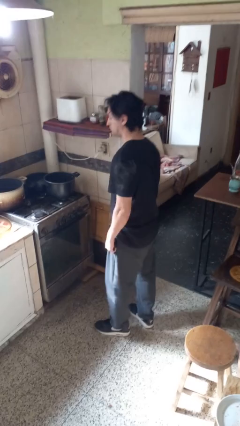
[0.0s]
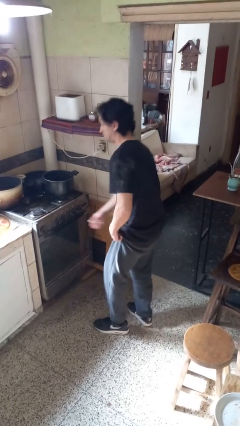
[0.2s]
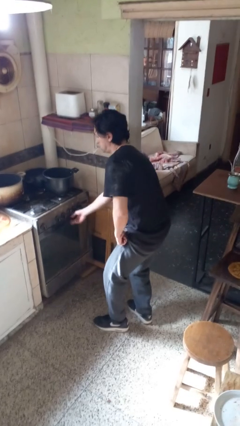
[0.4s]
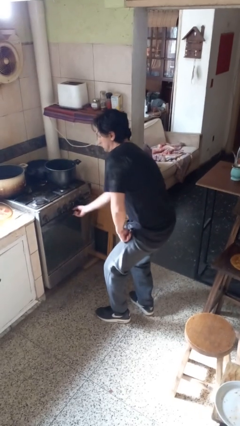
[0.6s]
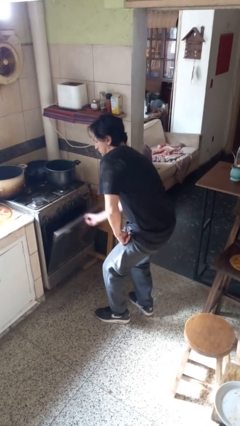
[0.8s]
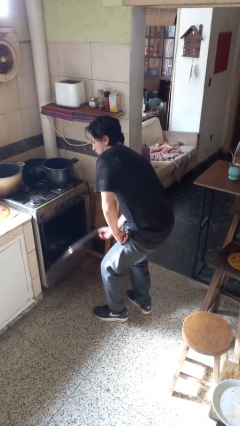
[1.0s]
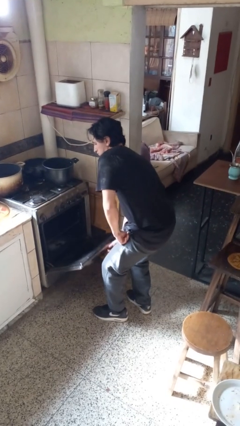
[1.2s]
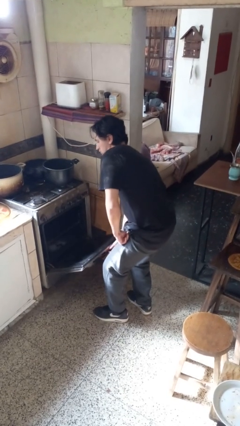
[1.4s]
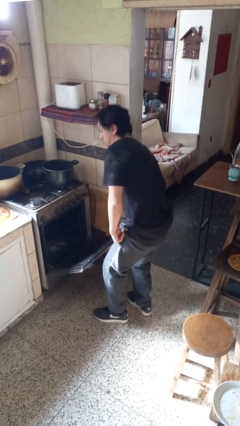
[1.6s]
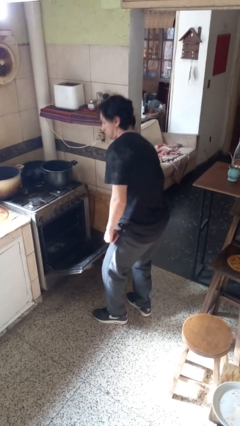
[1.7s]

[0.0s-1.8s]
person opens oven door

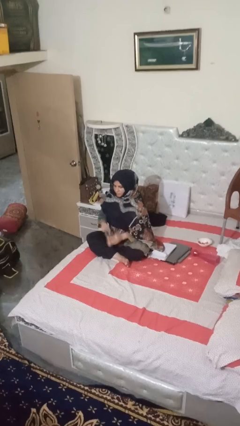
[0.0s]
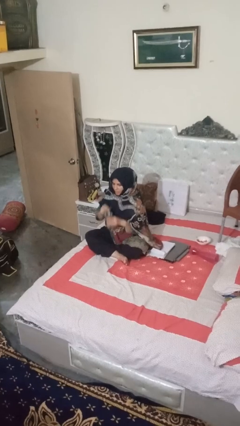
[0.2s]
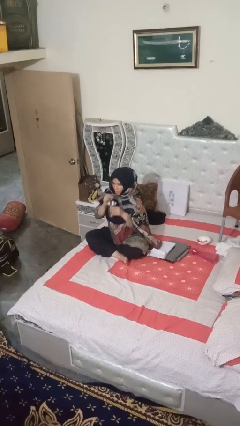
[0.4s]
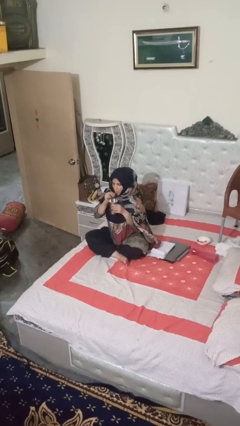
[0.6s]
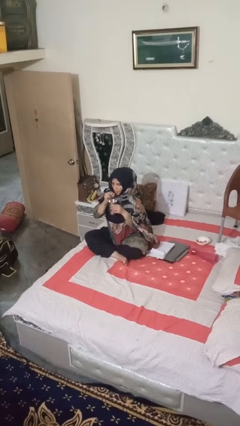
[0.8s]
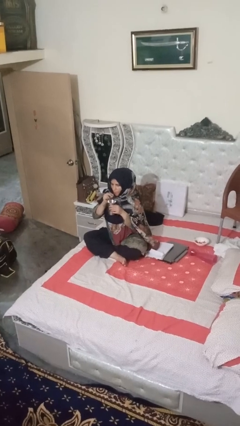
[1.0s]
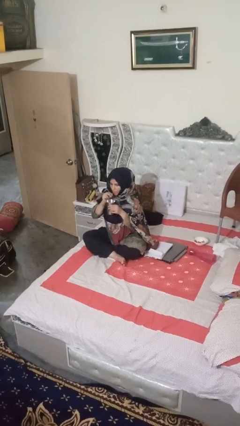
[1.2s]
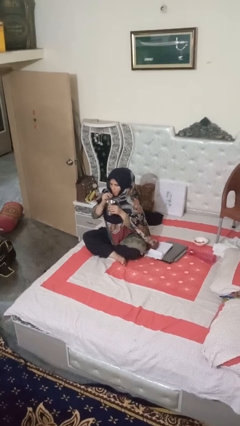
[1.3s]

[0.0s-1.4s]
person drinks from straw

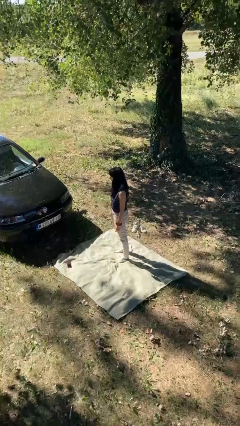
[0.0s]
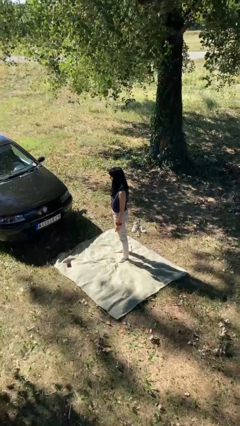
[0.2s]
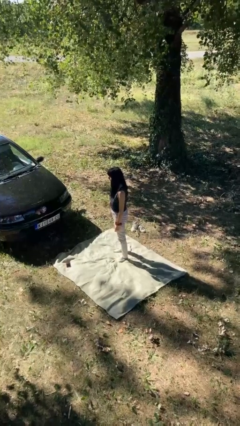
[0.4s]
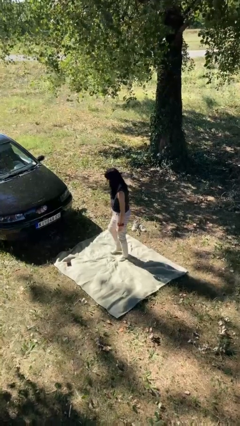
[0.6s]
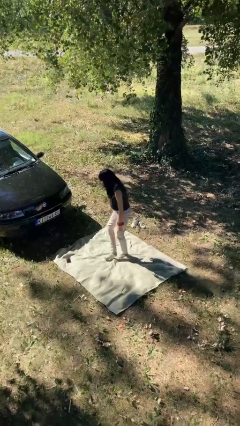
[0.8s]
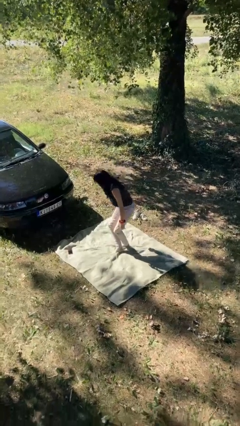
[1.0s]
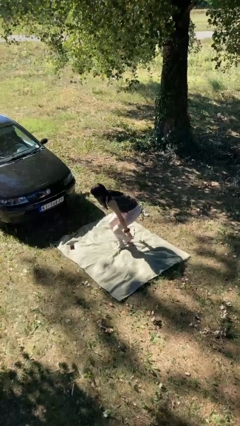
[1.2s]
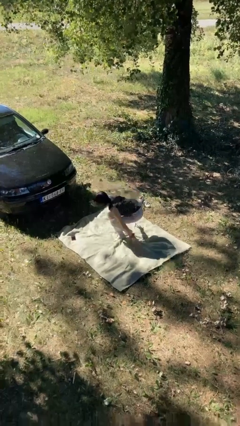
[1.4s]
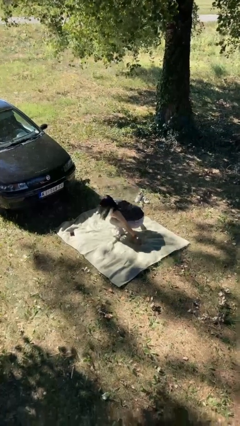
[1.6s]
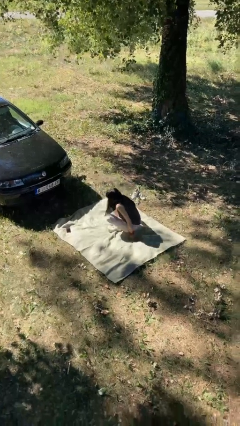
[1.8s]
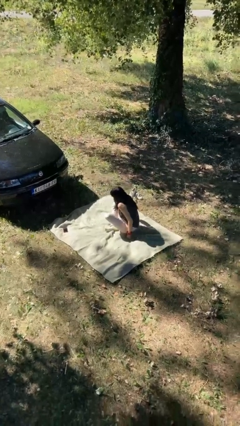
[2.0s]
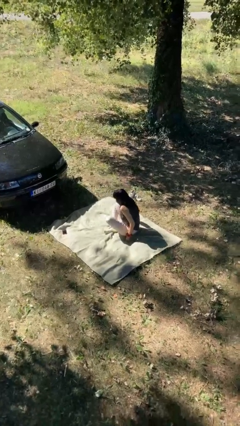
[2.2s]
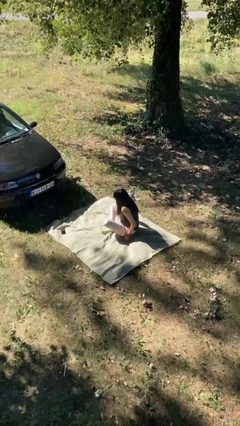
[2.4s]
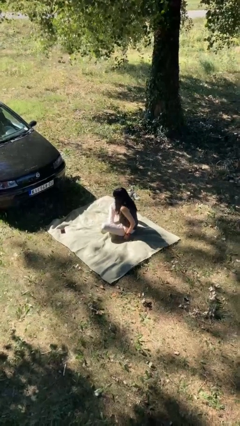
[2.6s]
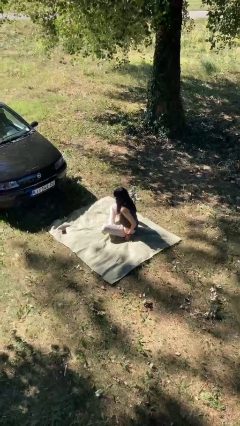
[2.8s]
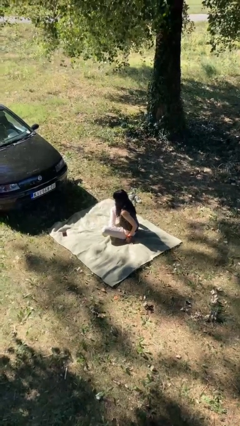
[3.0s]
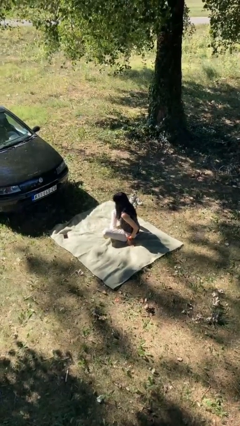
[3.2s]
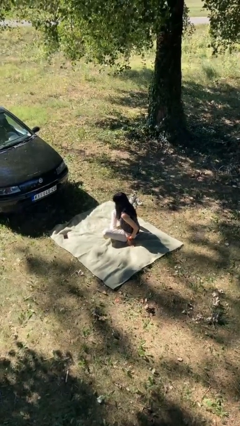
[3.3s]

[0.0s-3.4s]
person sits crisscross

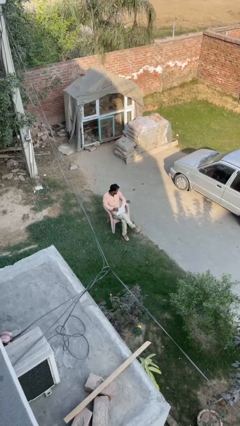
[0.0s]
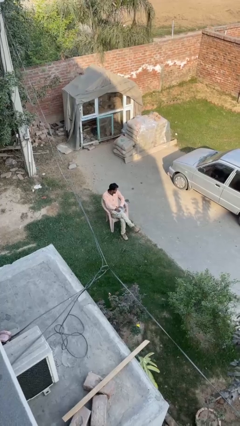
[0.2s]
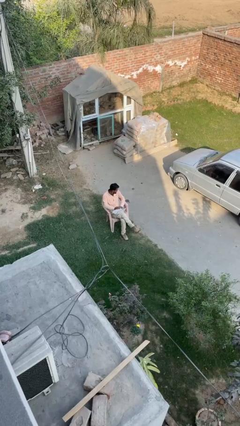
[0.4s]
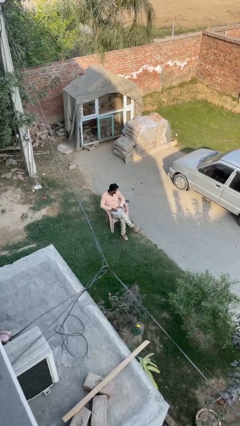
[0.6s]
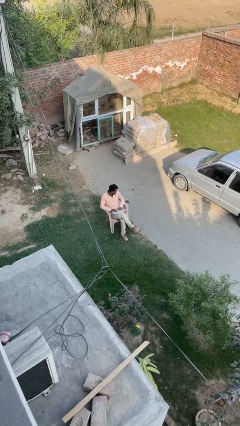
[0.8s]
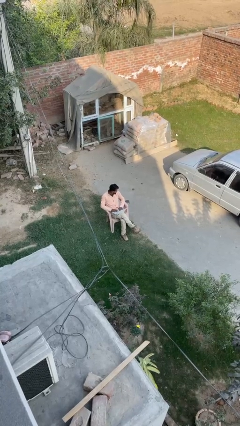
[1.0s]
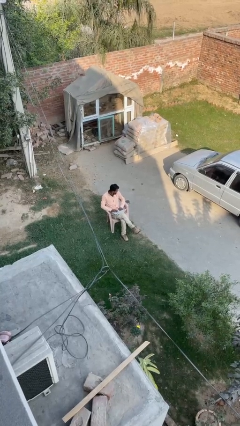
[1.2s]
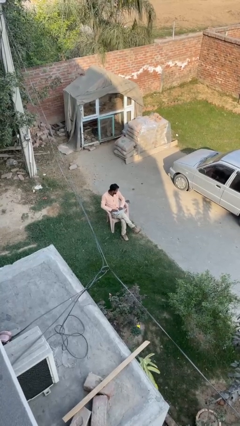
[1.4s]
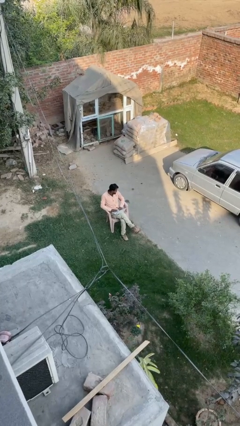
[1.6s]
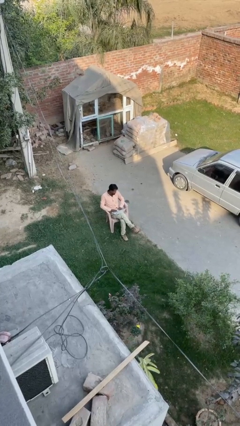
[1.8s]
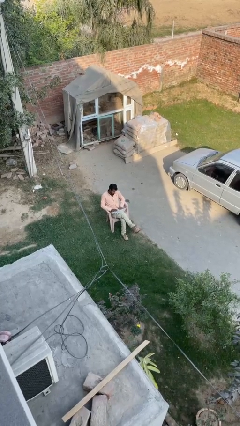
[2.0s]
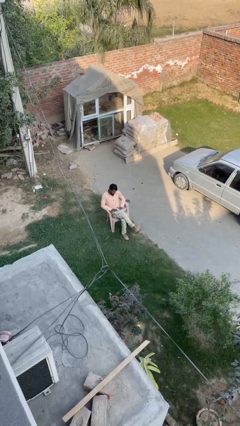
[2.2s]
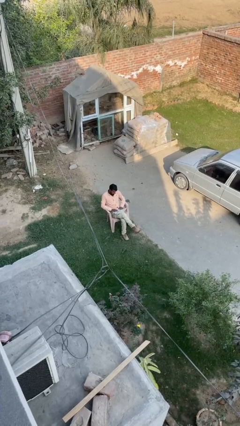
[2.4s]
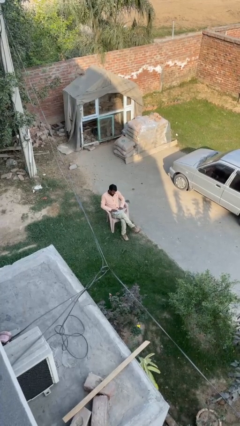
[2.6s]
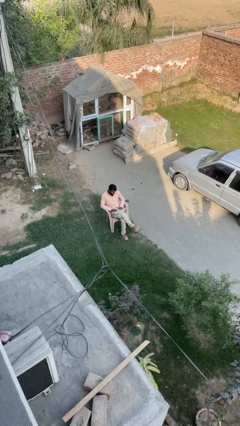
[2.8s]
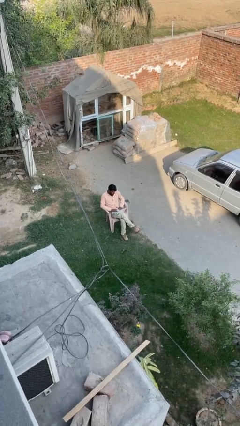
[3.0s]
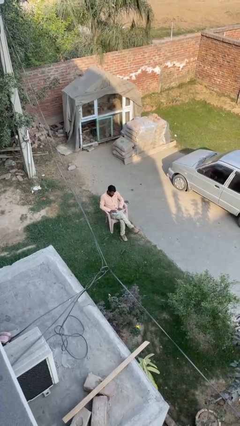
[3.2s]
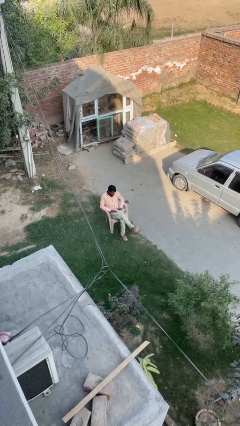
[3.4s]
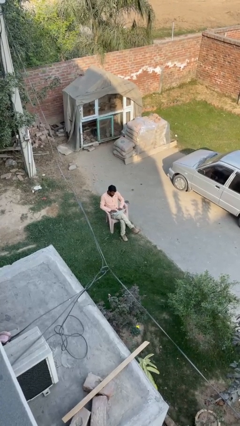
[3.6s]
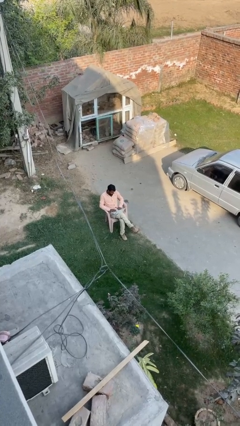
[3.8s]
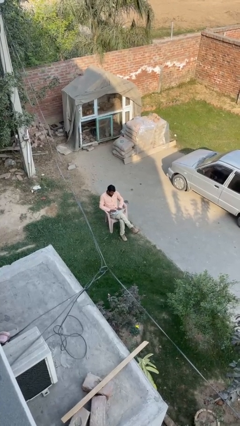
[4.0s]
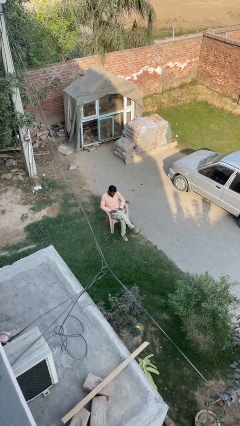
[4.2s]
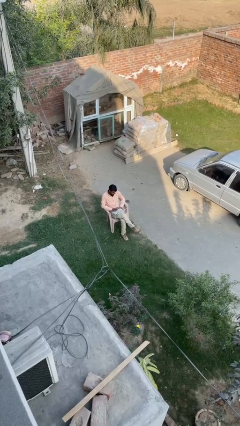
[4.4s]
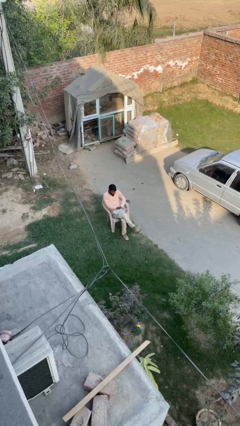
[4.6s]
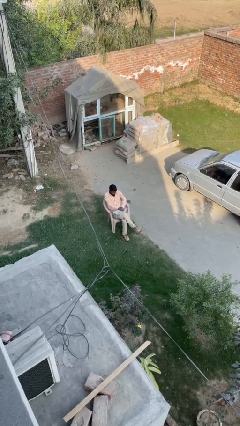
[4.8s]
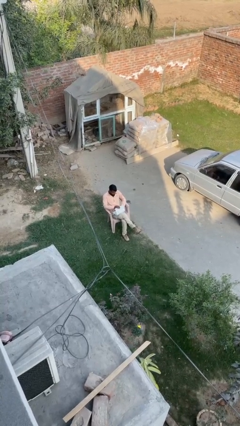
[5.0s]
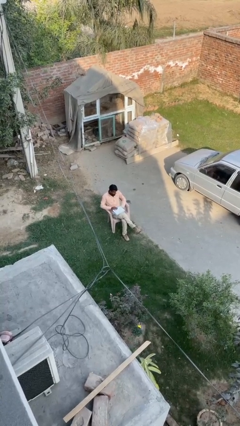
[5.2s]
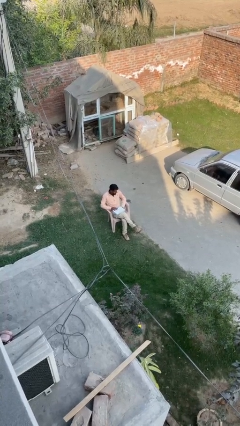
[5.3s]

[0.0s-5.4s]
person interacts with laptop

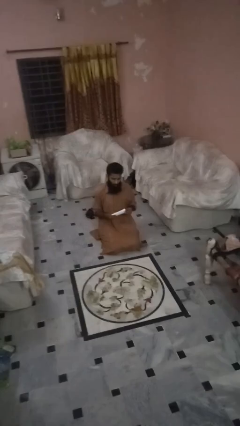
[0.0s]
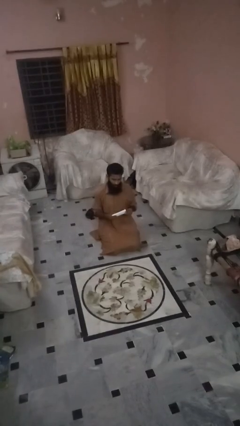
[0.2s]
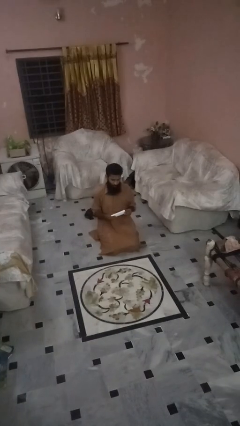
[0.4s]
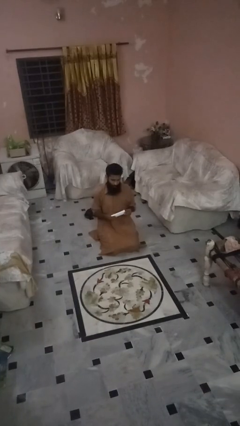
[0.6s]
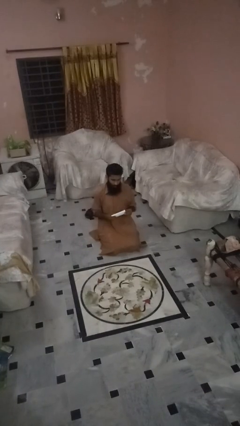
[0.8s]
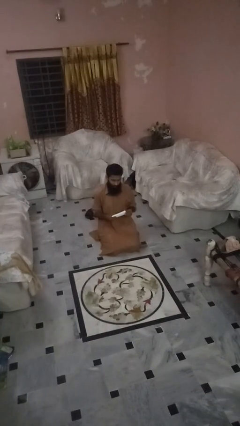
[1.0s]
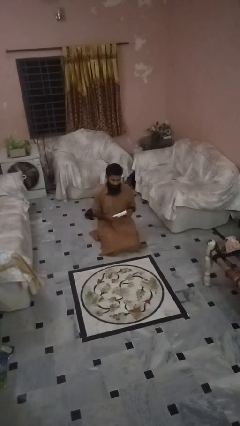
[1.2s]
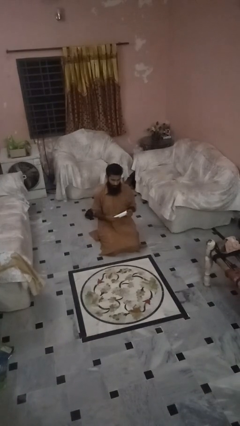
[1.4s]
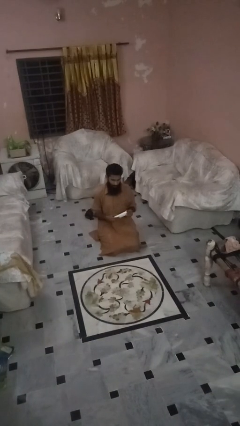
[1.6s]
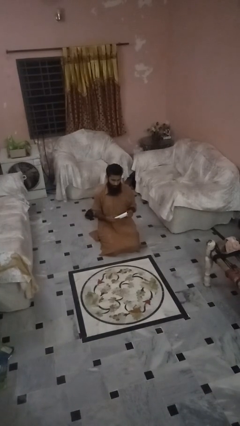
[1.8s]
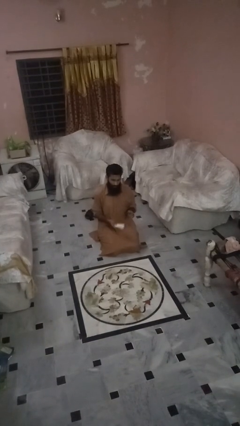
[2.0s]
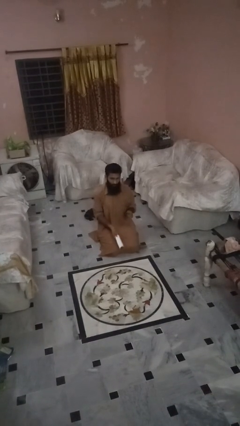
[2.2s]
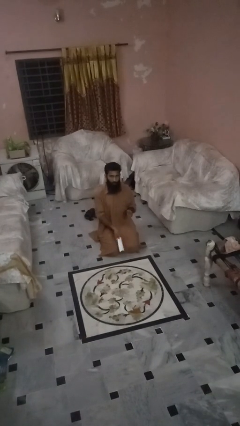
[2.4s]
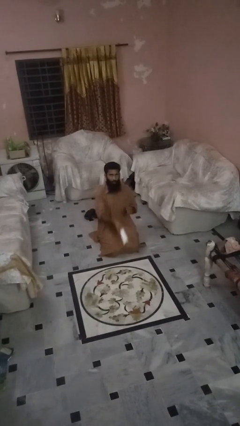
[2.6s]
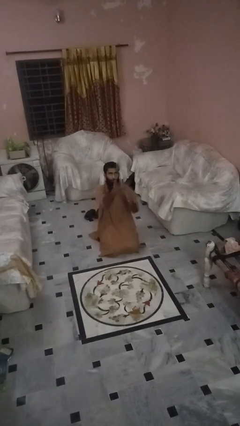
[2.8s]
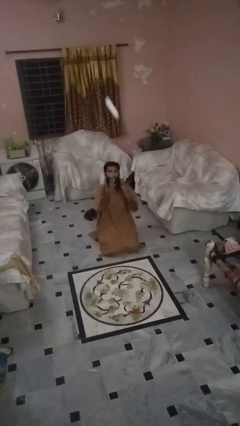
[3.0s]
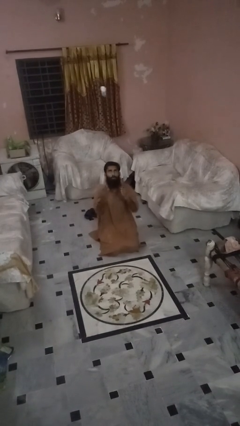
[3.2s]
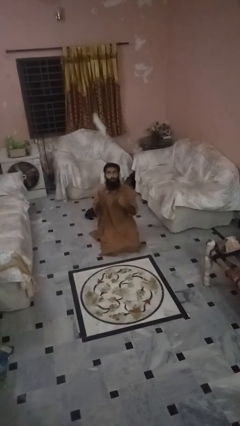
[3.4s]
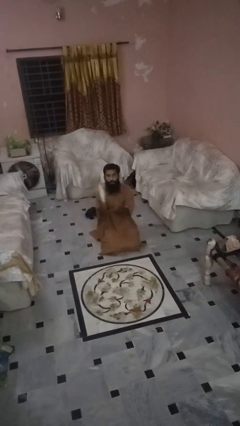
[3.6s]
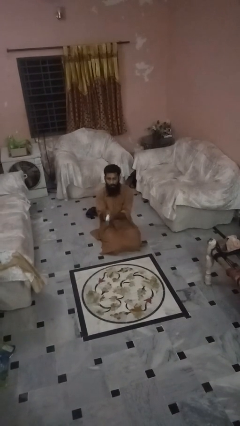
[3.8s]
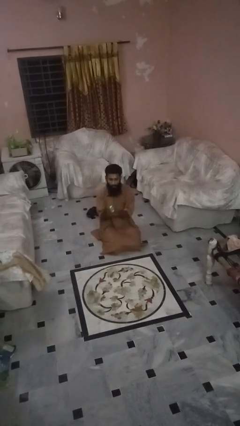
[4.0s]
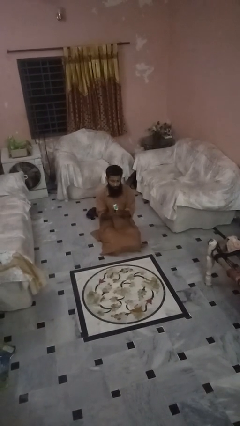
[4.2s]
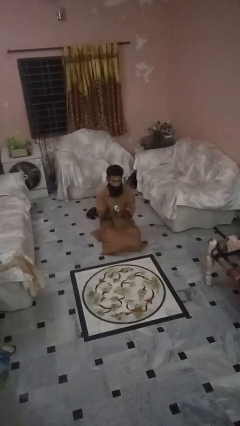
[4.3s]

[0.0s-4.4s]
person drops object

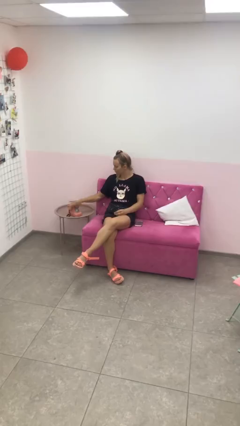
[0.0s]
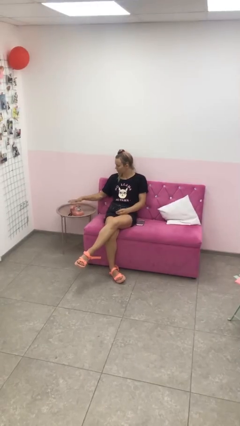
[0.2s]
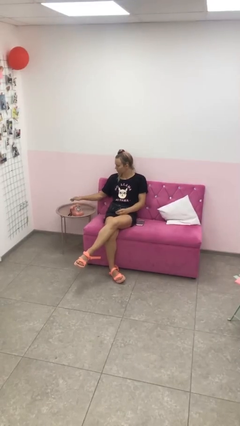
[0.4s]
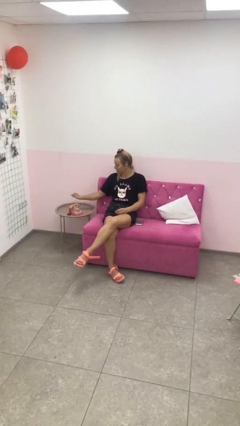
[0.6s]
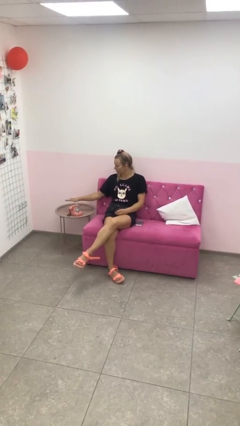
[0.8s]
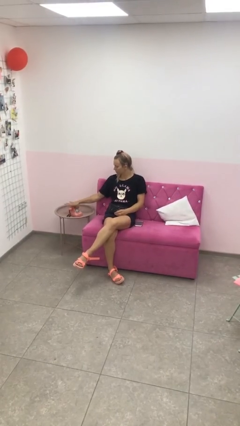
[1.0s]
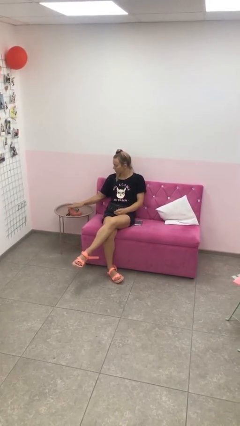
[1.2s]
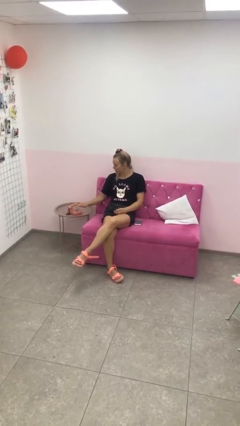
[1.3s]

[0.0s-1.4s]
person waves hand over object
